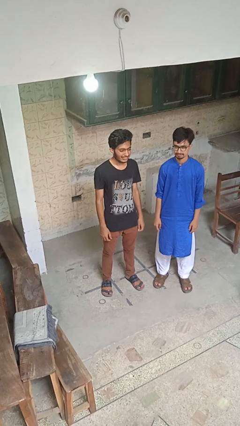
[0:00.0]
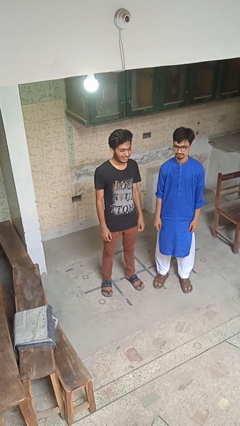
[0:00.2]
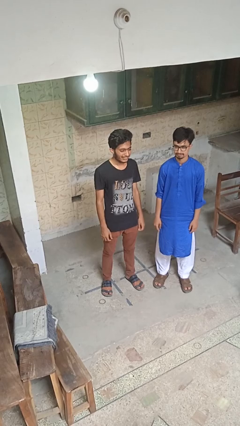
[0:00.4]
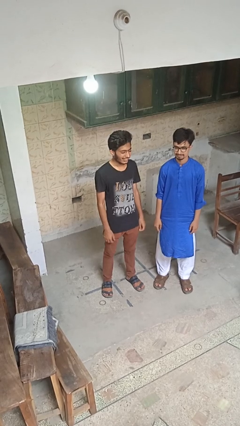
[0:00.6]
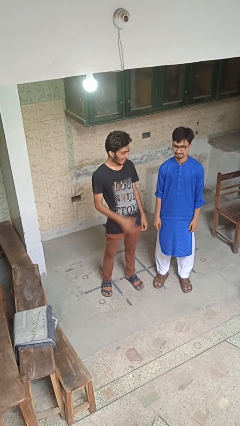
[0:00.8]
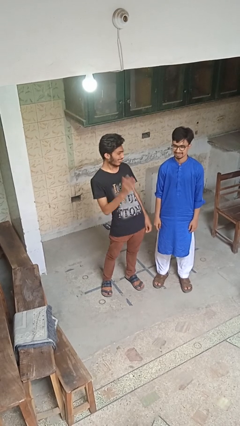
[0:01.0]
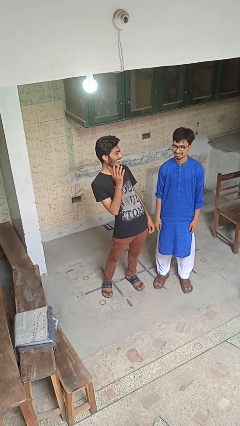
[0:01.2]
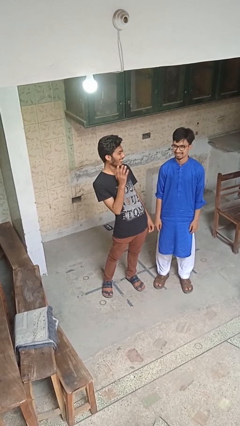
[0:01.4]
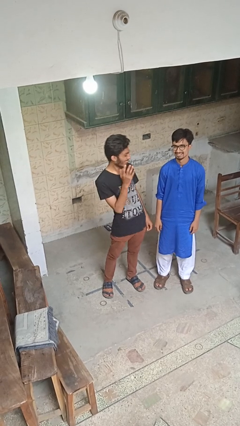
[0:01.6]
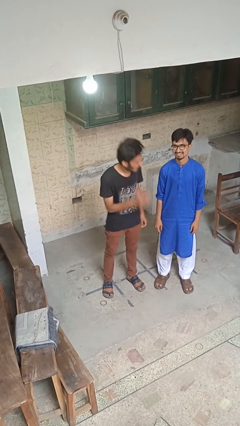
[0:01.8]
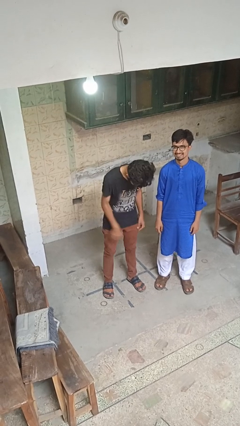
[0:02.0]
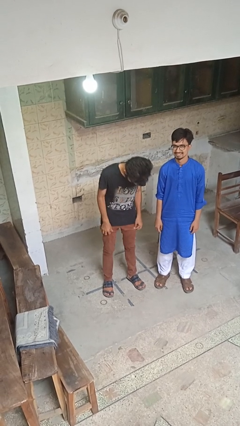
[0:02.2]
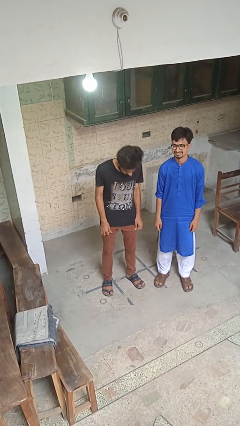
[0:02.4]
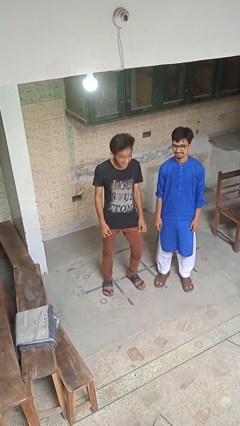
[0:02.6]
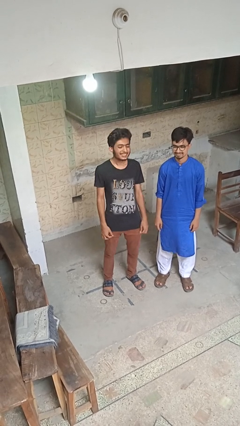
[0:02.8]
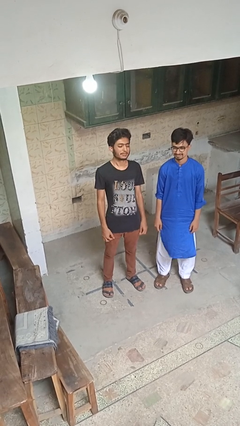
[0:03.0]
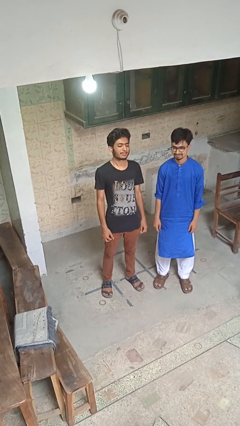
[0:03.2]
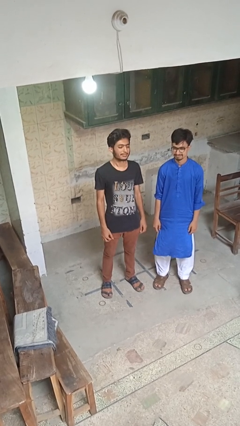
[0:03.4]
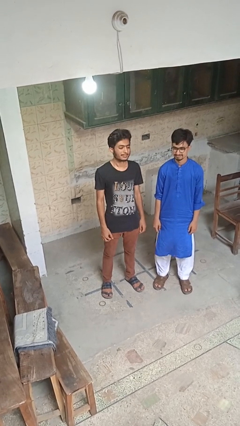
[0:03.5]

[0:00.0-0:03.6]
person laughs with person

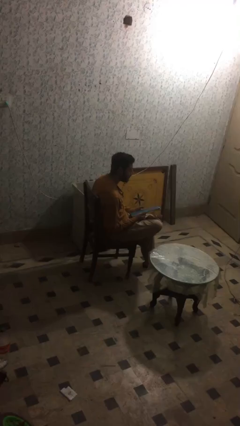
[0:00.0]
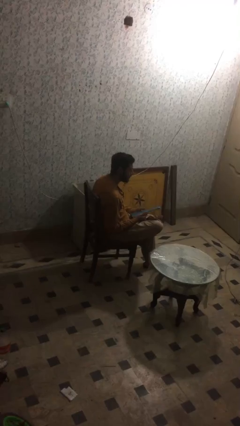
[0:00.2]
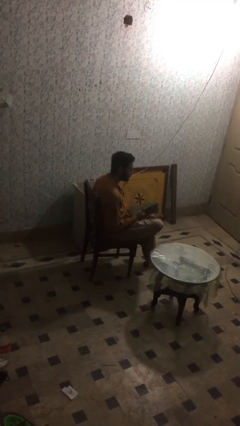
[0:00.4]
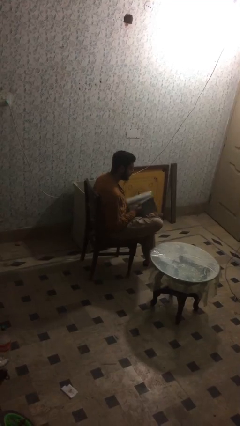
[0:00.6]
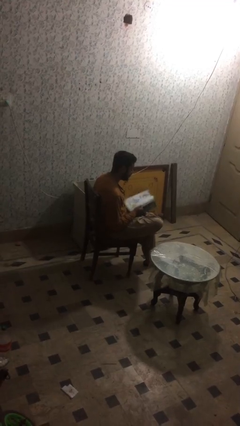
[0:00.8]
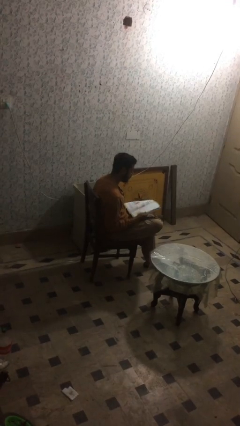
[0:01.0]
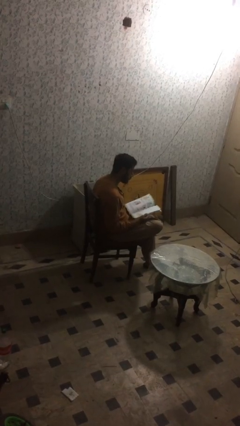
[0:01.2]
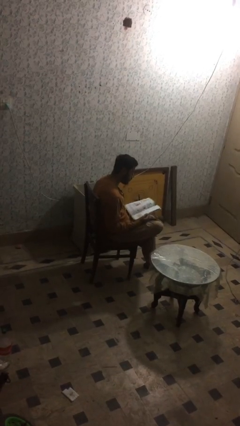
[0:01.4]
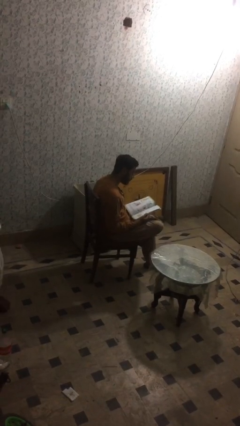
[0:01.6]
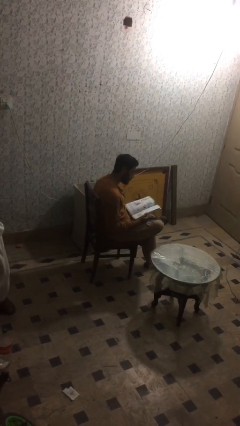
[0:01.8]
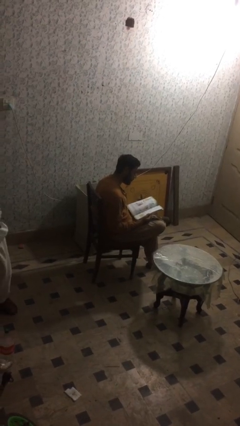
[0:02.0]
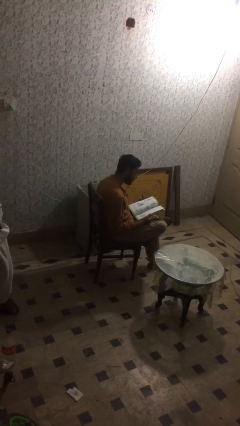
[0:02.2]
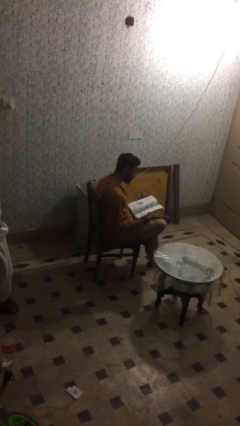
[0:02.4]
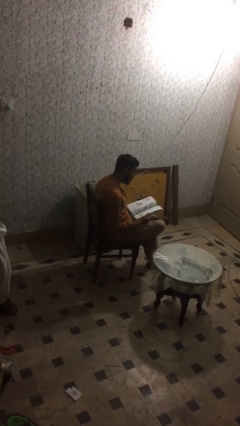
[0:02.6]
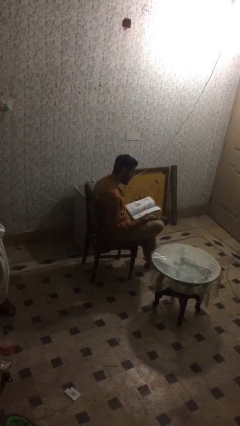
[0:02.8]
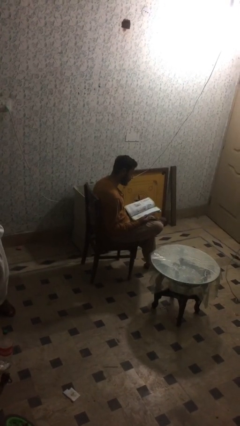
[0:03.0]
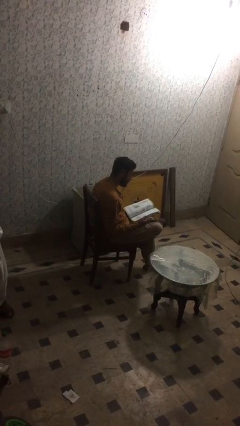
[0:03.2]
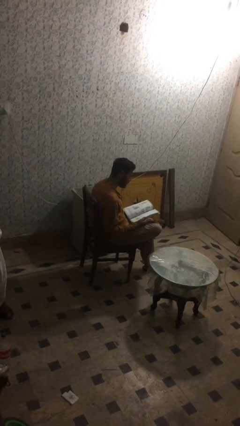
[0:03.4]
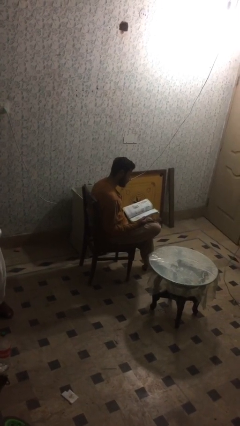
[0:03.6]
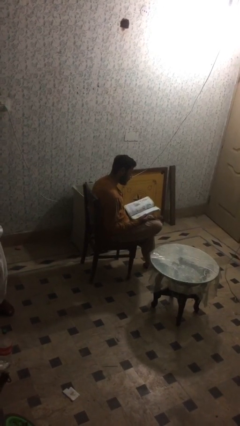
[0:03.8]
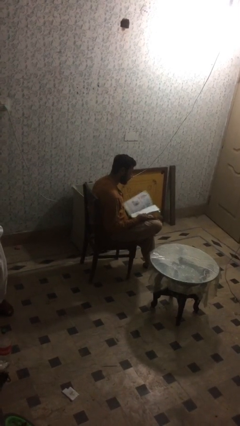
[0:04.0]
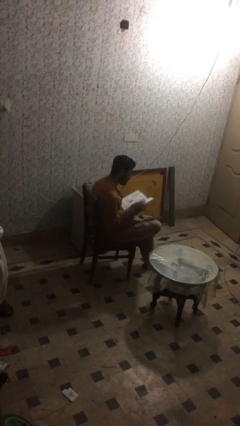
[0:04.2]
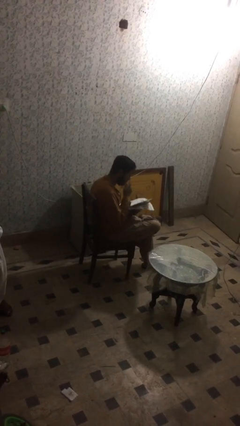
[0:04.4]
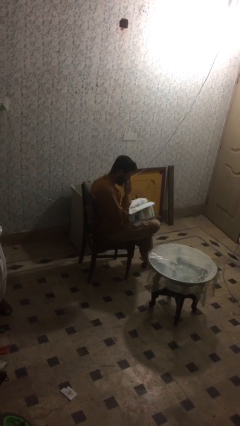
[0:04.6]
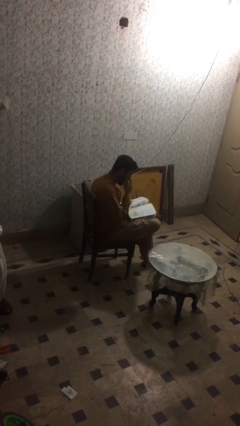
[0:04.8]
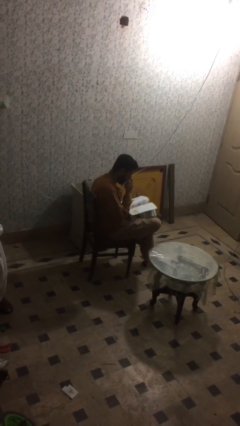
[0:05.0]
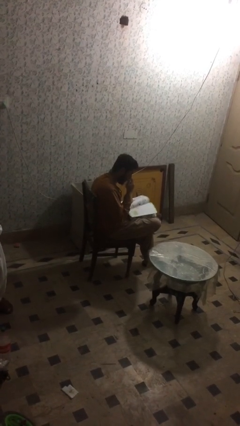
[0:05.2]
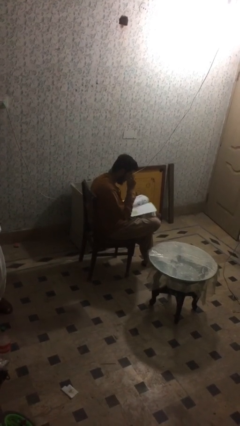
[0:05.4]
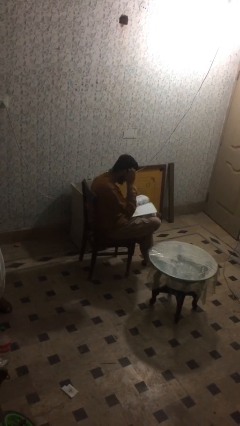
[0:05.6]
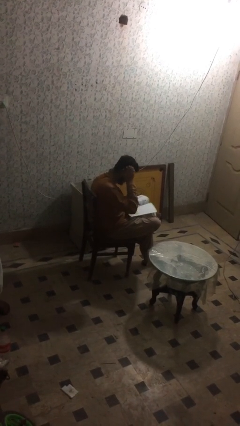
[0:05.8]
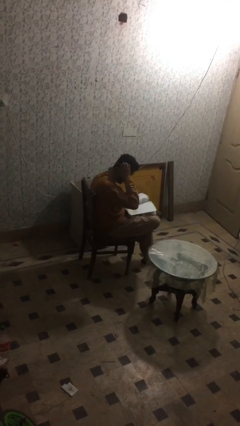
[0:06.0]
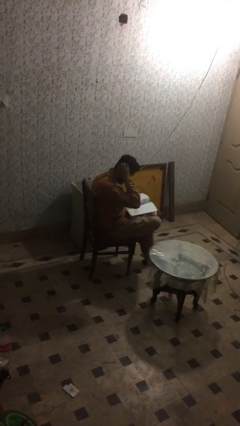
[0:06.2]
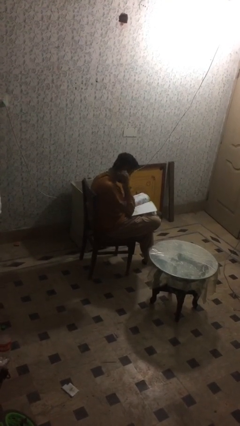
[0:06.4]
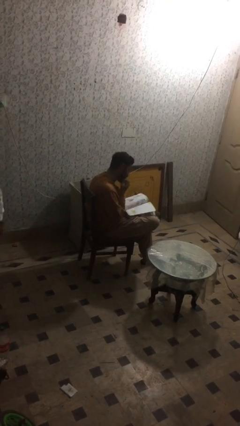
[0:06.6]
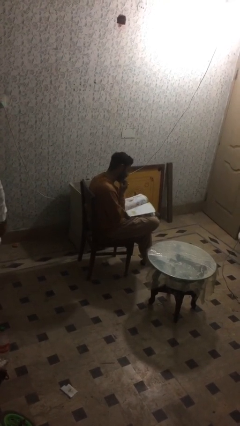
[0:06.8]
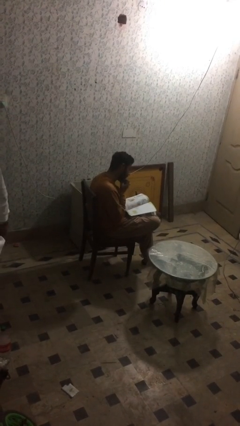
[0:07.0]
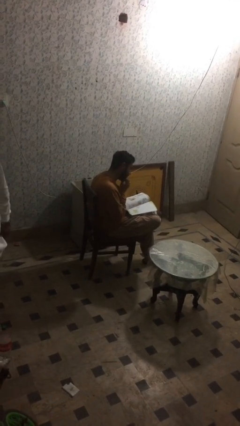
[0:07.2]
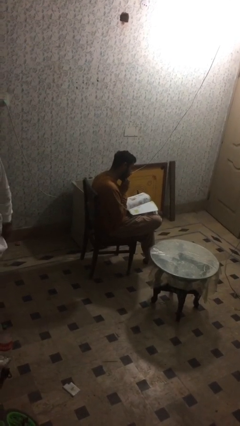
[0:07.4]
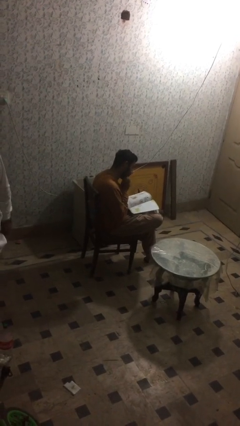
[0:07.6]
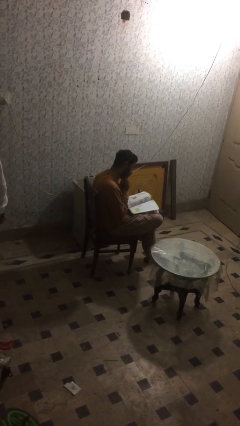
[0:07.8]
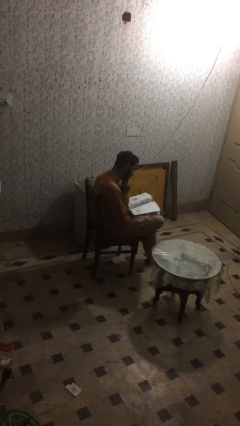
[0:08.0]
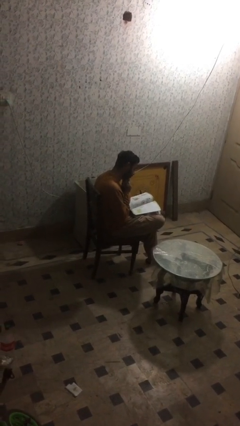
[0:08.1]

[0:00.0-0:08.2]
person reads document

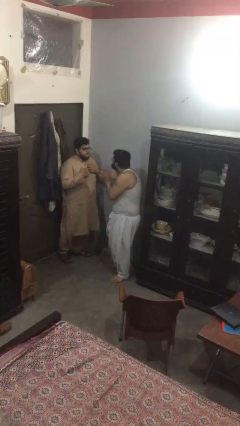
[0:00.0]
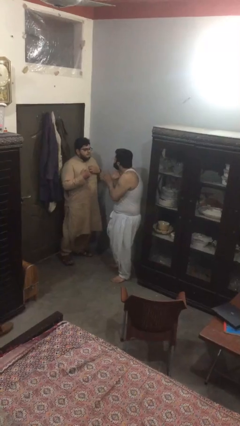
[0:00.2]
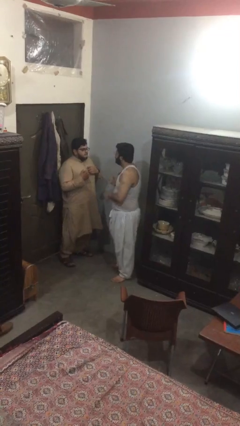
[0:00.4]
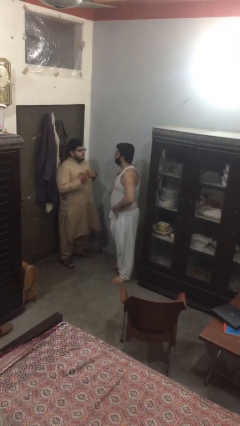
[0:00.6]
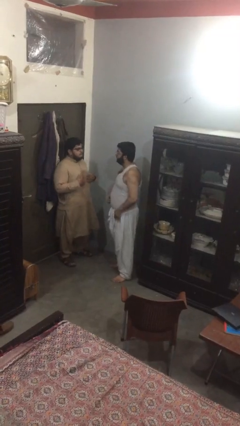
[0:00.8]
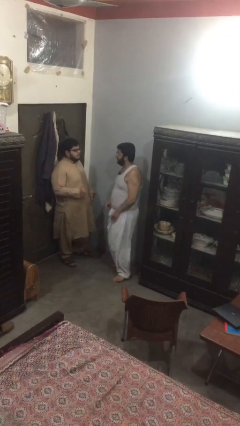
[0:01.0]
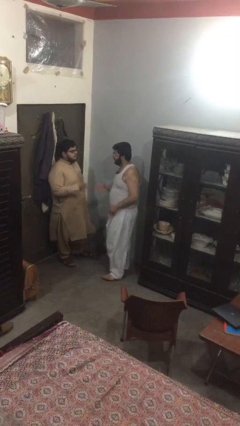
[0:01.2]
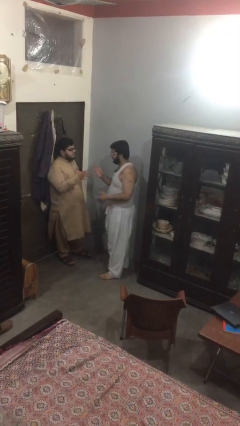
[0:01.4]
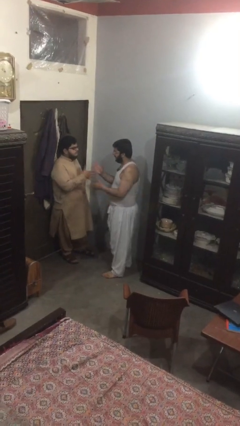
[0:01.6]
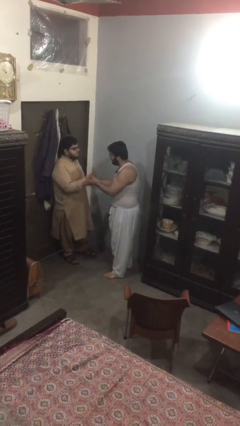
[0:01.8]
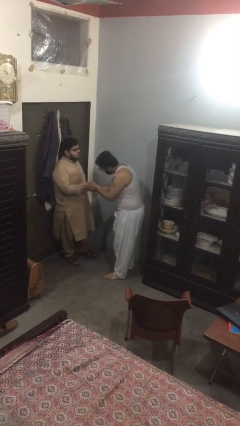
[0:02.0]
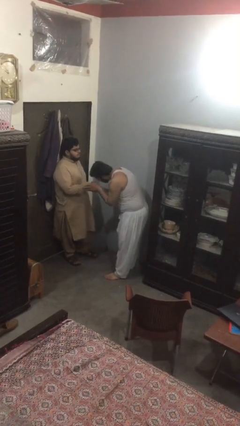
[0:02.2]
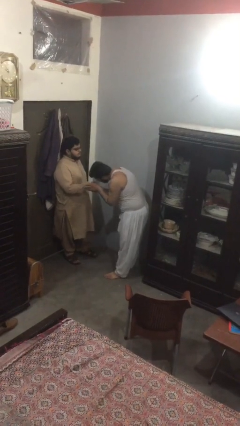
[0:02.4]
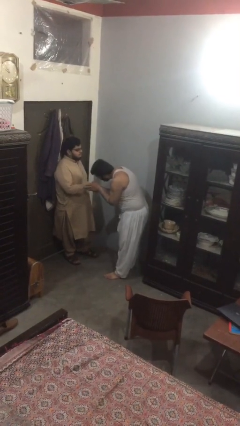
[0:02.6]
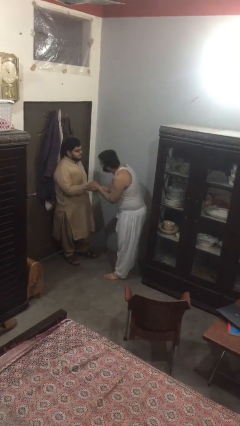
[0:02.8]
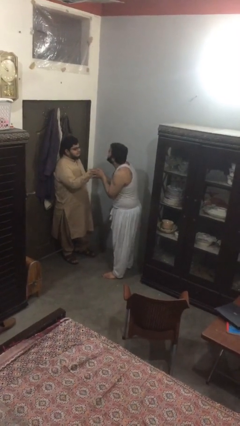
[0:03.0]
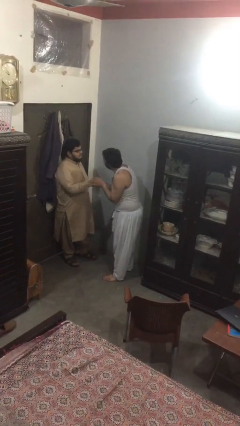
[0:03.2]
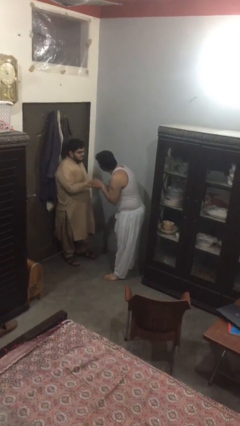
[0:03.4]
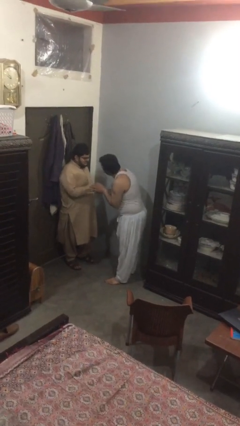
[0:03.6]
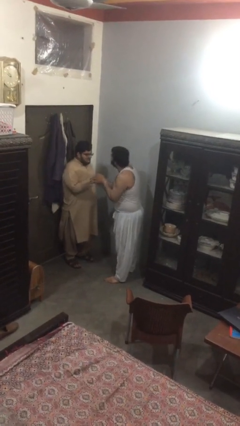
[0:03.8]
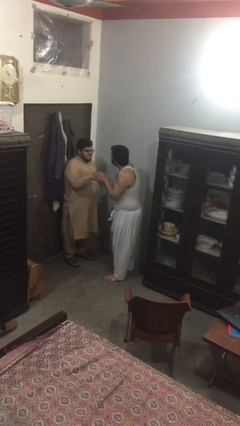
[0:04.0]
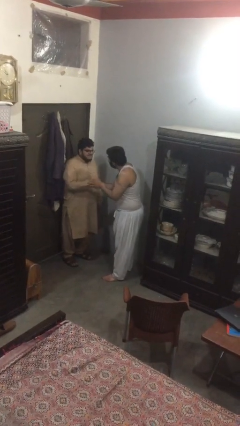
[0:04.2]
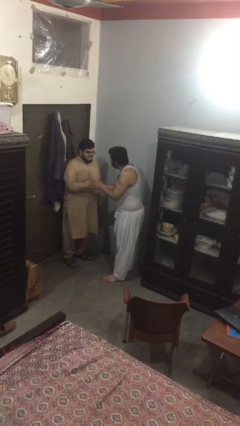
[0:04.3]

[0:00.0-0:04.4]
person shakes hand

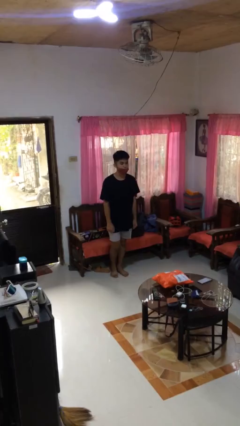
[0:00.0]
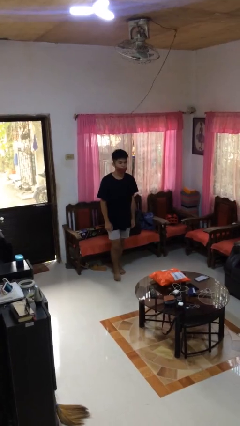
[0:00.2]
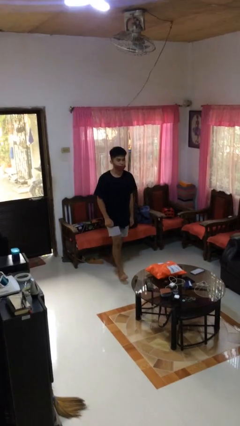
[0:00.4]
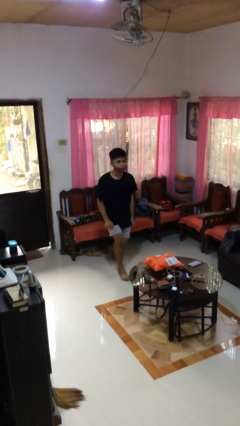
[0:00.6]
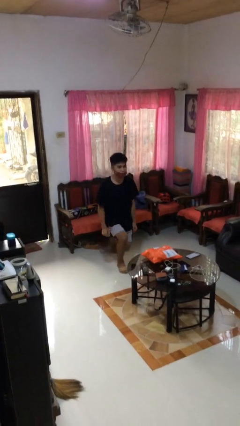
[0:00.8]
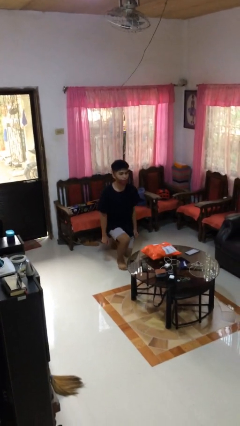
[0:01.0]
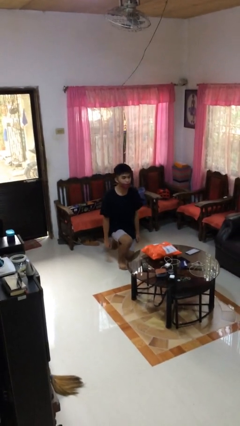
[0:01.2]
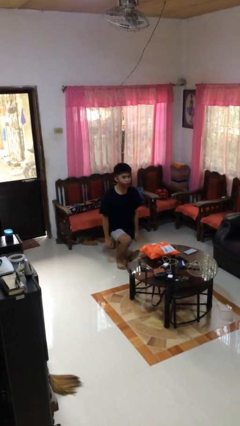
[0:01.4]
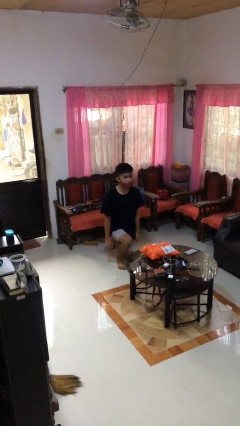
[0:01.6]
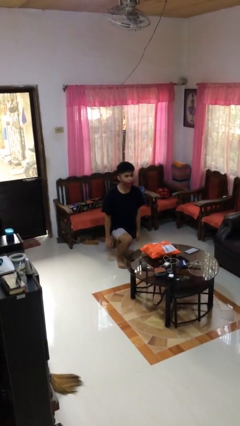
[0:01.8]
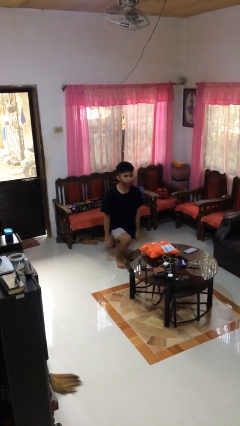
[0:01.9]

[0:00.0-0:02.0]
person kneels
